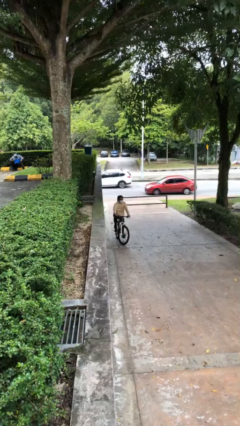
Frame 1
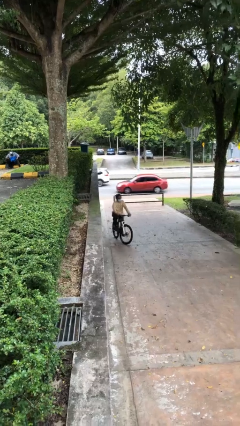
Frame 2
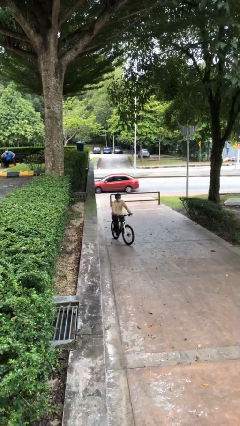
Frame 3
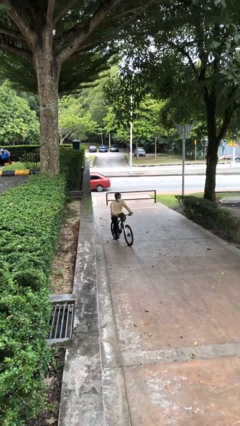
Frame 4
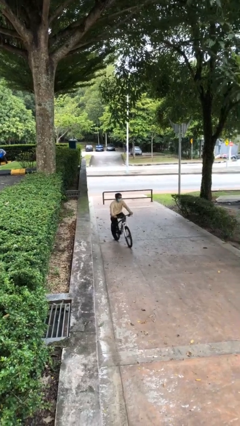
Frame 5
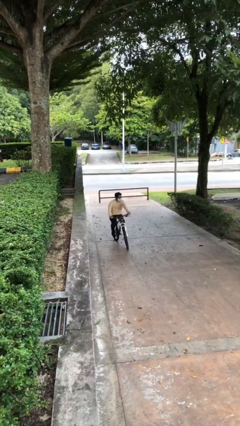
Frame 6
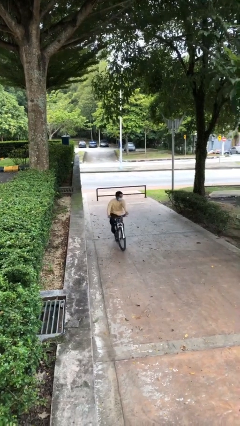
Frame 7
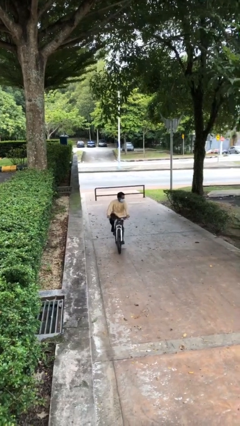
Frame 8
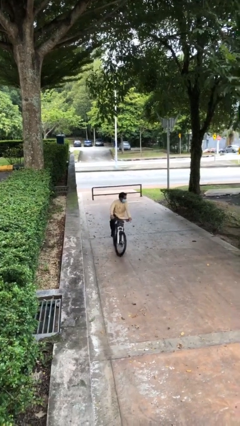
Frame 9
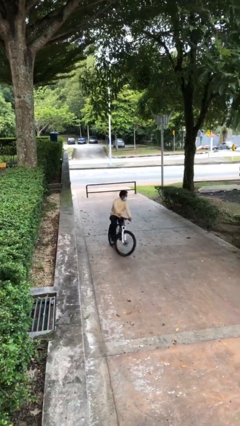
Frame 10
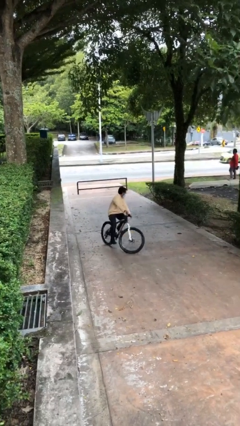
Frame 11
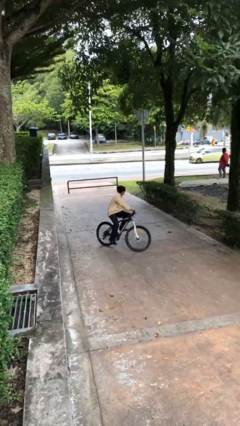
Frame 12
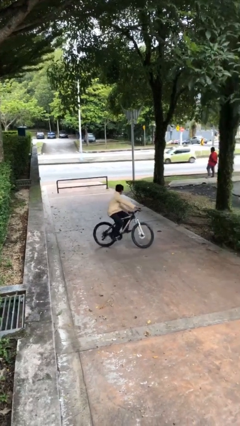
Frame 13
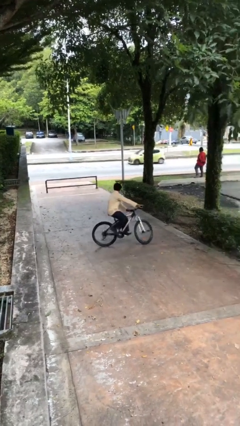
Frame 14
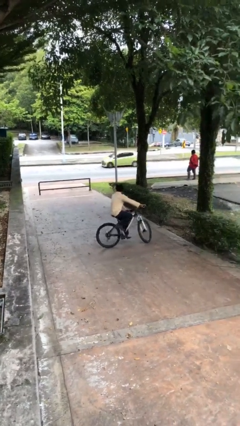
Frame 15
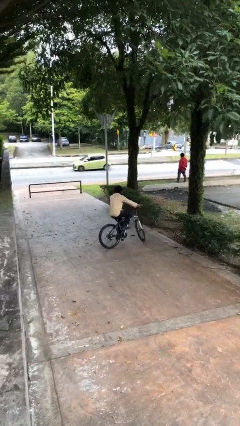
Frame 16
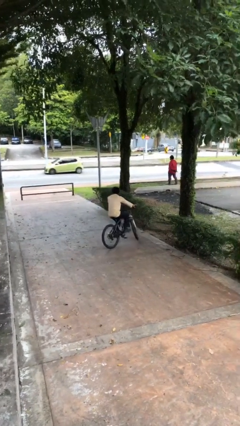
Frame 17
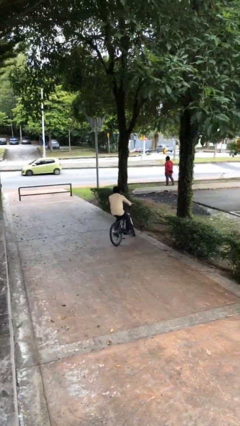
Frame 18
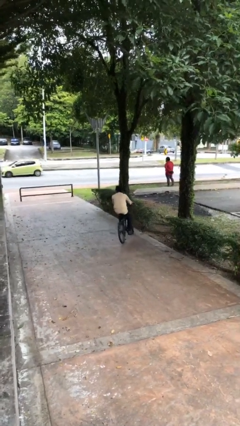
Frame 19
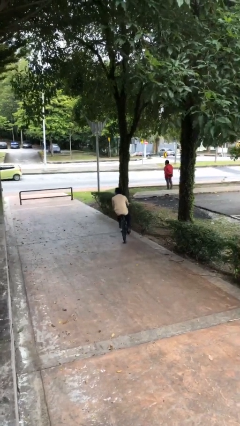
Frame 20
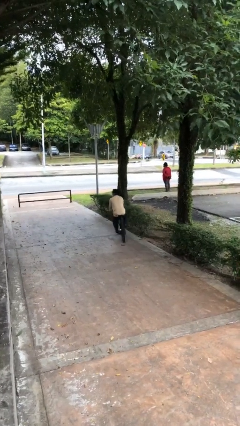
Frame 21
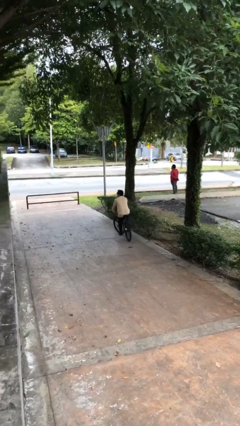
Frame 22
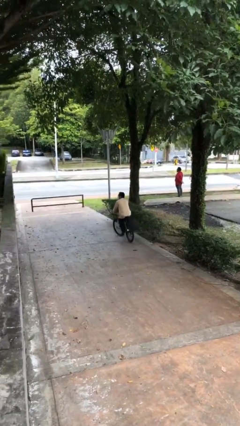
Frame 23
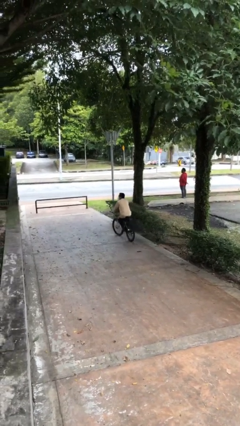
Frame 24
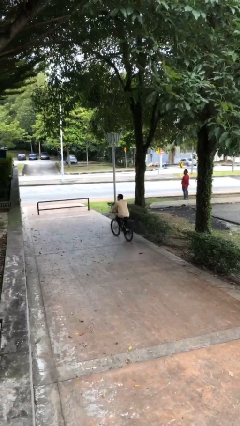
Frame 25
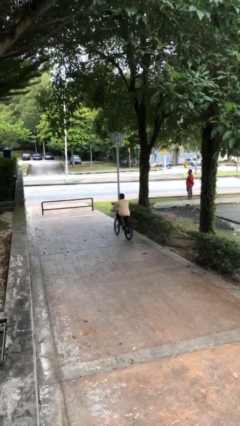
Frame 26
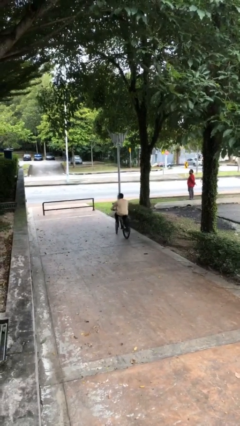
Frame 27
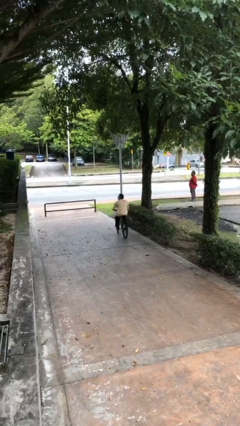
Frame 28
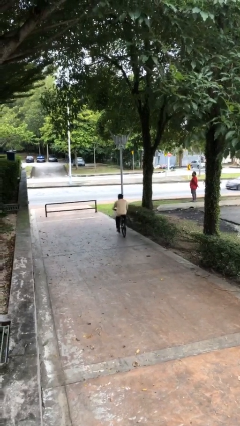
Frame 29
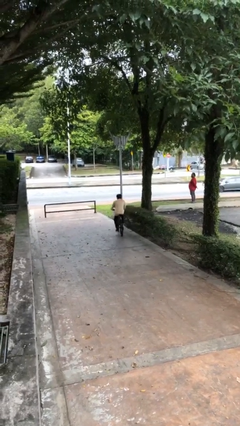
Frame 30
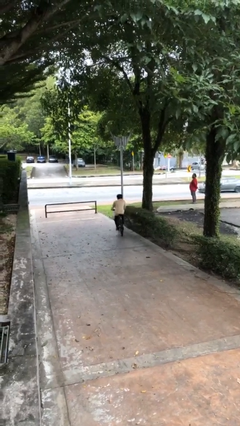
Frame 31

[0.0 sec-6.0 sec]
person rides bicycle

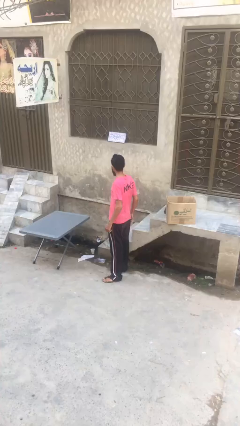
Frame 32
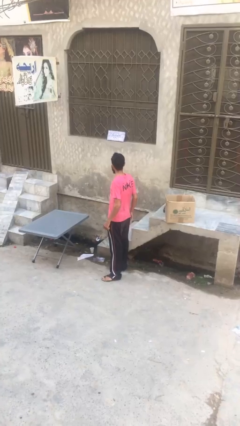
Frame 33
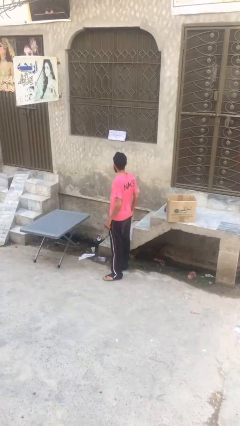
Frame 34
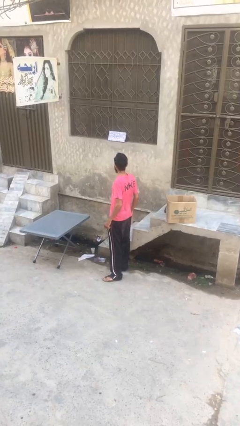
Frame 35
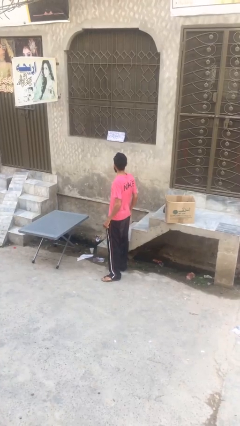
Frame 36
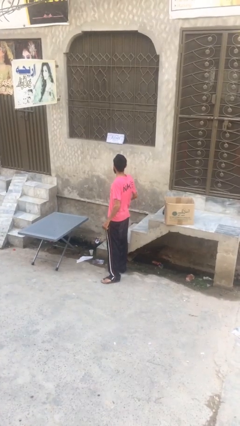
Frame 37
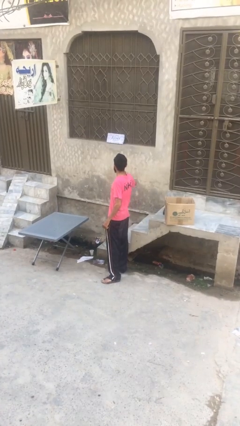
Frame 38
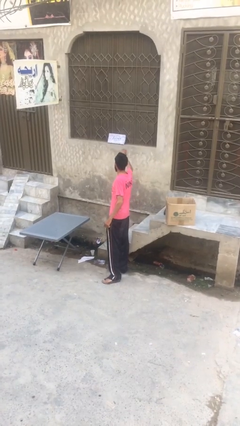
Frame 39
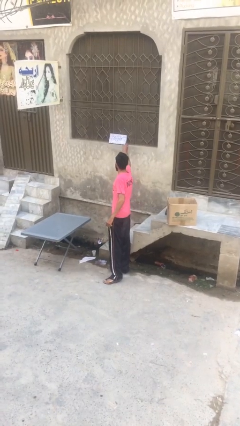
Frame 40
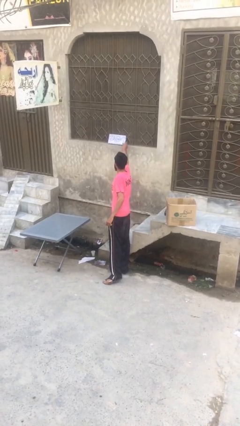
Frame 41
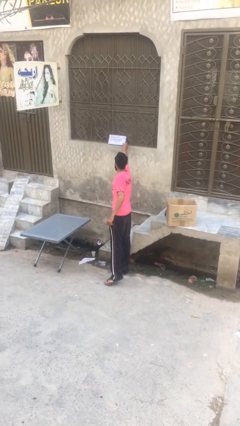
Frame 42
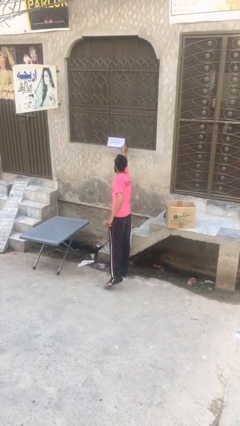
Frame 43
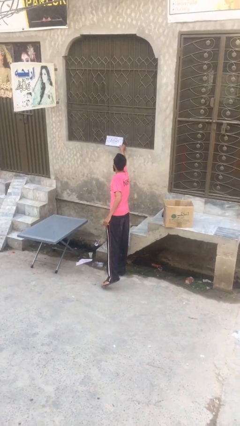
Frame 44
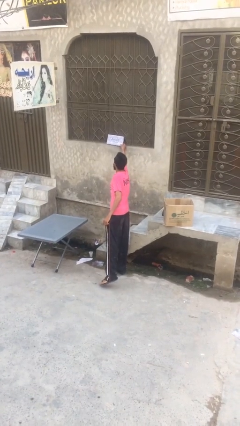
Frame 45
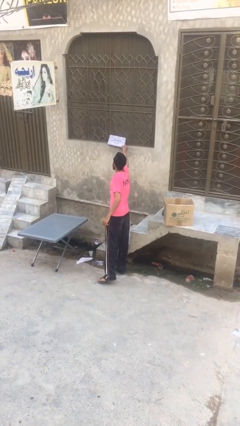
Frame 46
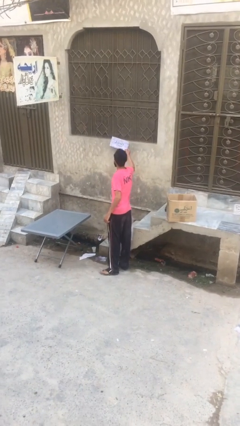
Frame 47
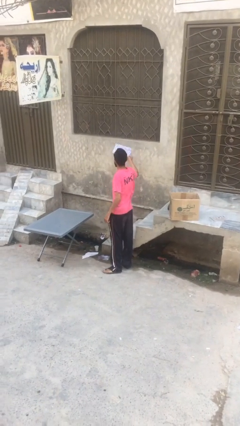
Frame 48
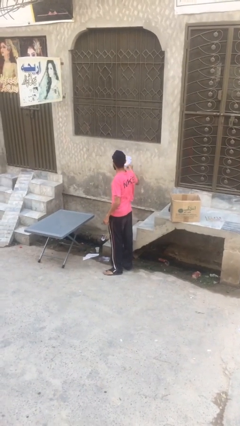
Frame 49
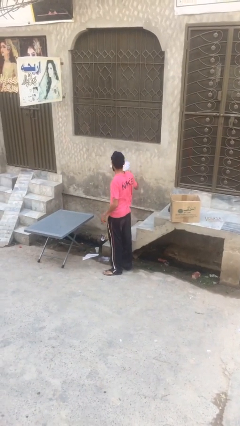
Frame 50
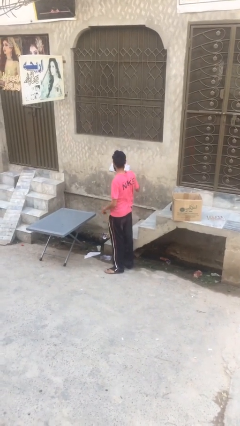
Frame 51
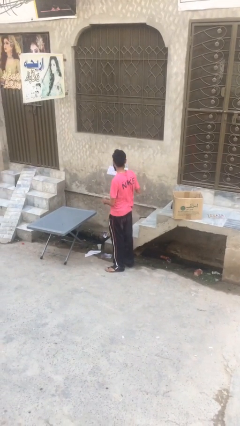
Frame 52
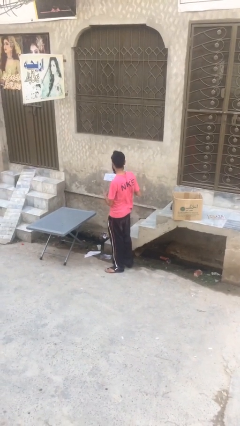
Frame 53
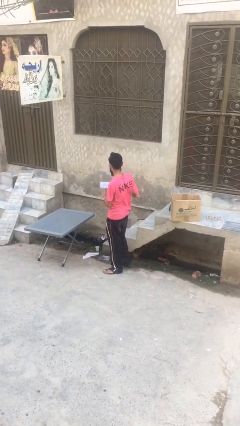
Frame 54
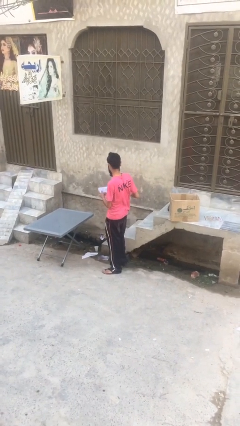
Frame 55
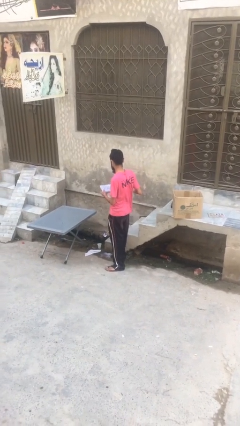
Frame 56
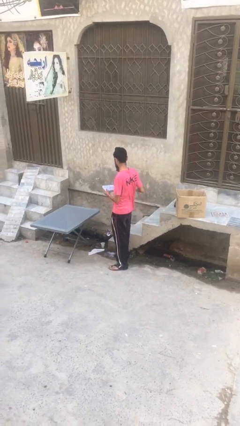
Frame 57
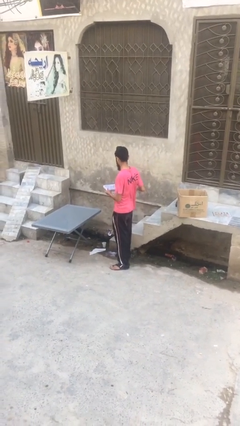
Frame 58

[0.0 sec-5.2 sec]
person picks up object from shelf

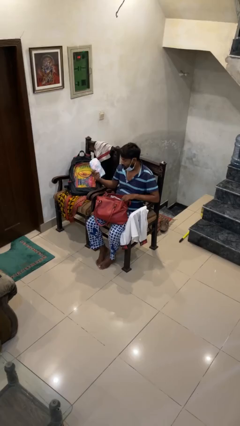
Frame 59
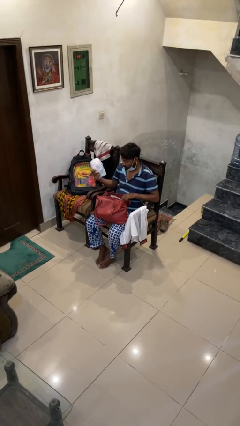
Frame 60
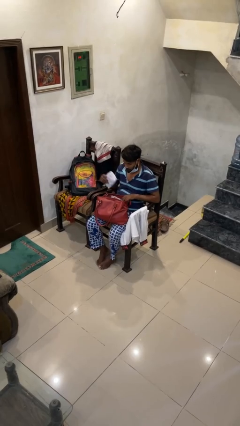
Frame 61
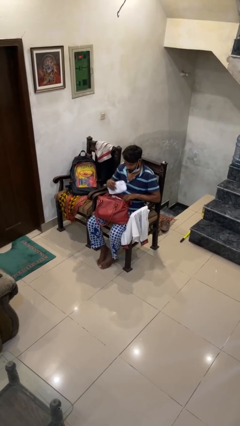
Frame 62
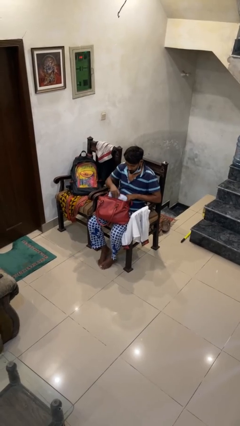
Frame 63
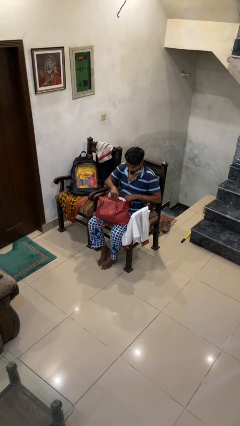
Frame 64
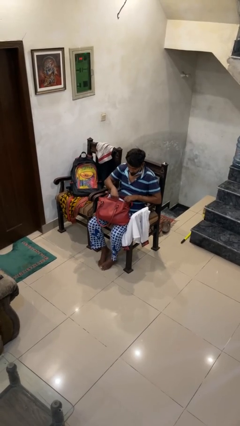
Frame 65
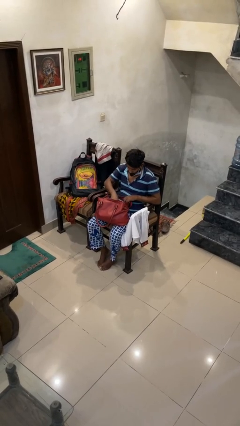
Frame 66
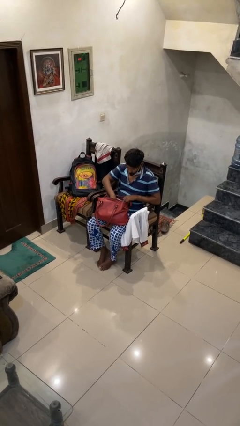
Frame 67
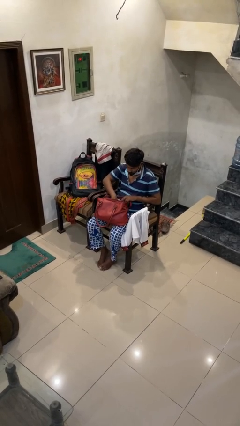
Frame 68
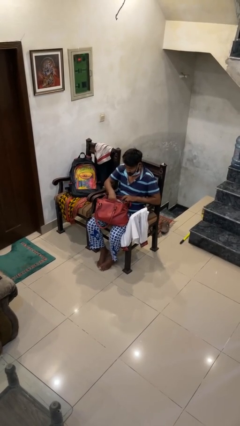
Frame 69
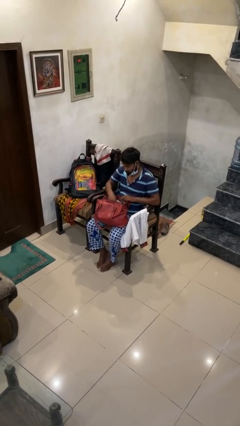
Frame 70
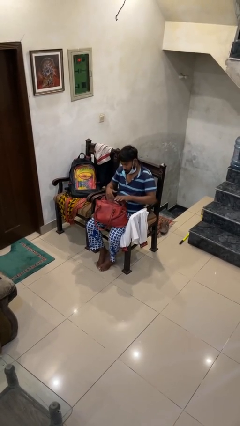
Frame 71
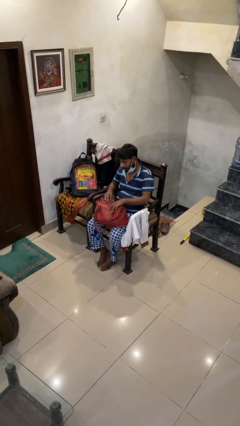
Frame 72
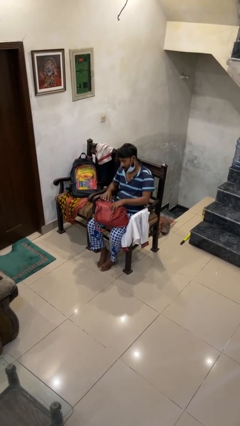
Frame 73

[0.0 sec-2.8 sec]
person puts object into purse

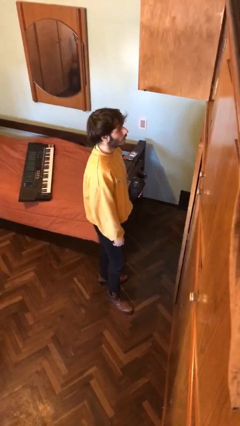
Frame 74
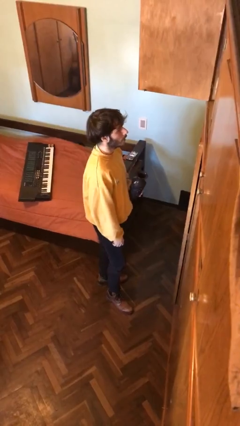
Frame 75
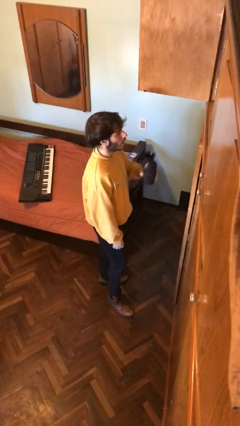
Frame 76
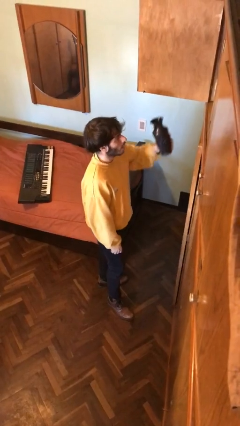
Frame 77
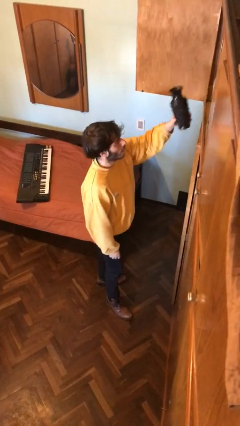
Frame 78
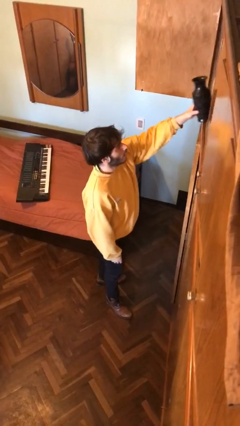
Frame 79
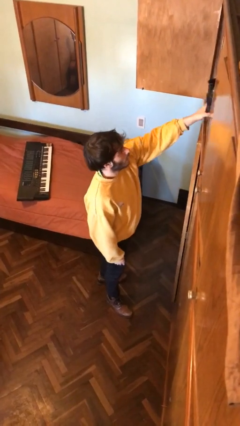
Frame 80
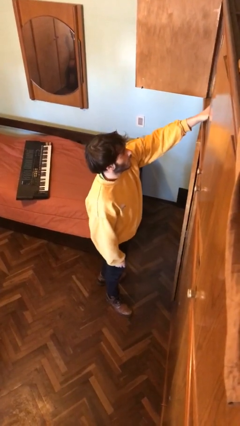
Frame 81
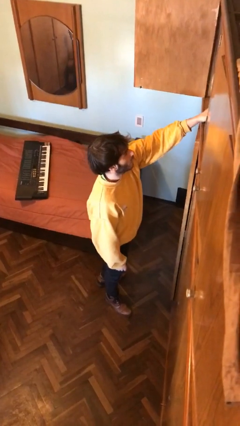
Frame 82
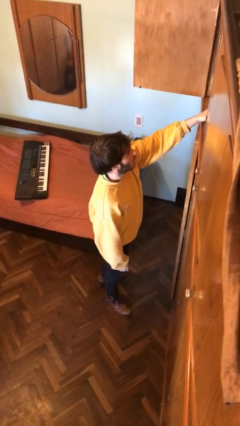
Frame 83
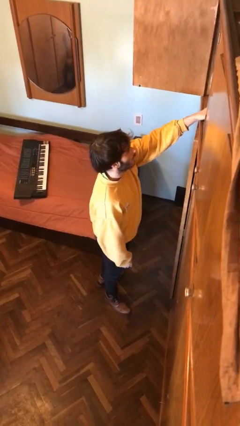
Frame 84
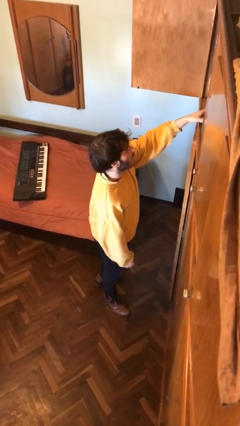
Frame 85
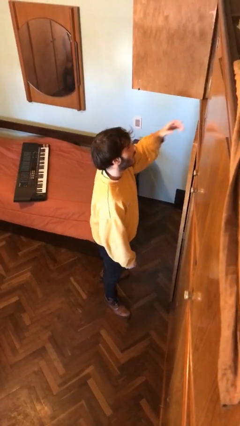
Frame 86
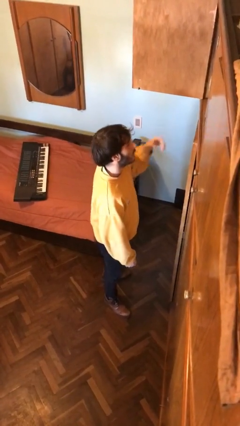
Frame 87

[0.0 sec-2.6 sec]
person puts down object into cabinet

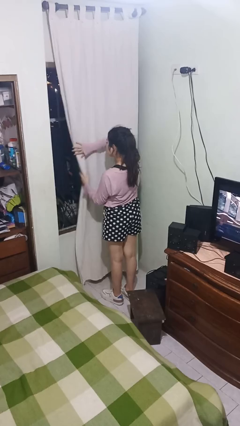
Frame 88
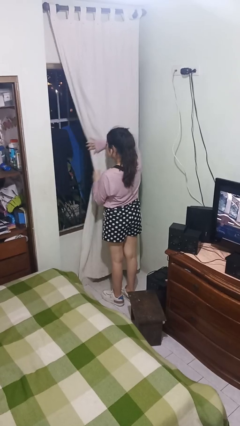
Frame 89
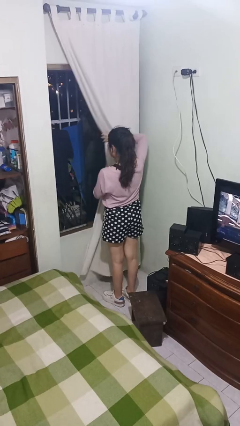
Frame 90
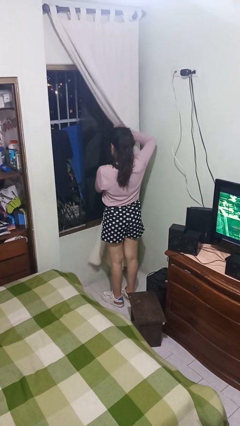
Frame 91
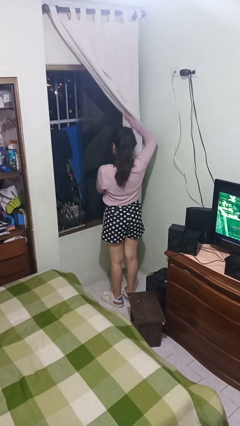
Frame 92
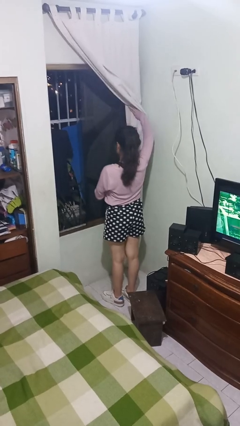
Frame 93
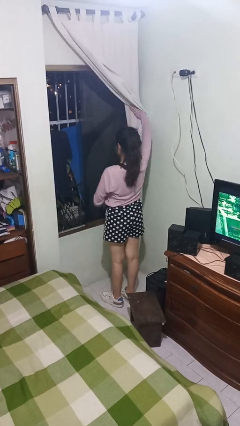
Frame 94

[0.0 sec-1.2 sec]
person opens curtains
